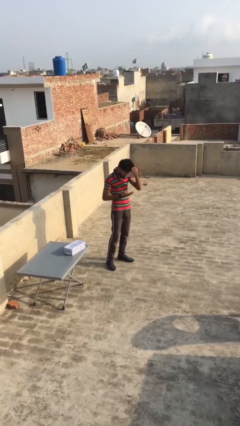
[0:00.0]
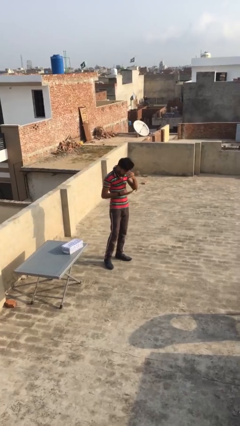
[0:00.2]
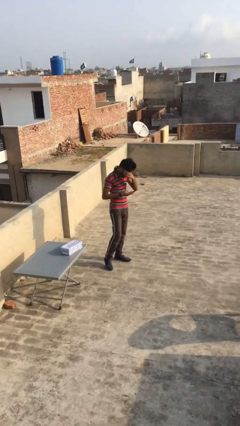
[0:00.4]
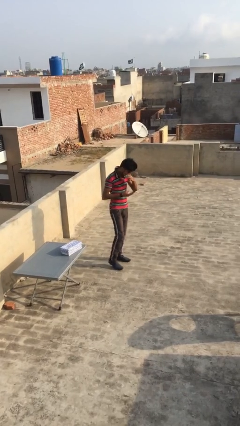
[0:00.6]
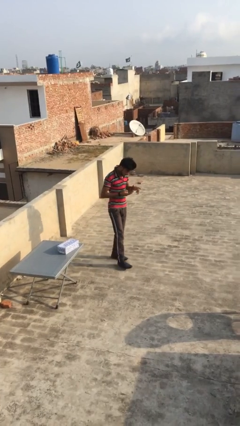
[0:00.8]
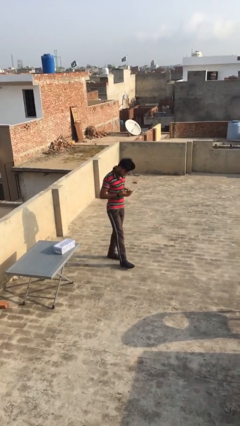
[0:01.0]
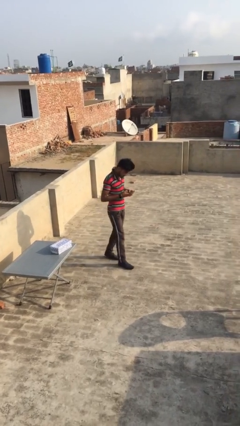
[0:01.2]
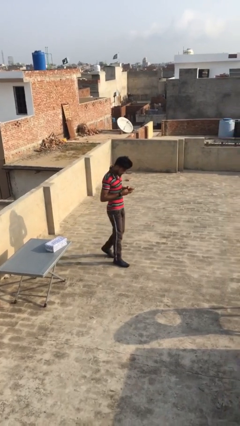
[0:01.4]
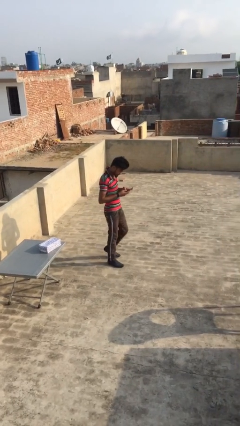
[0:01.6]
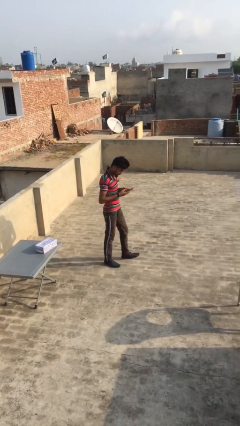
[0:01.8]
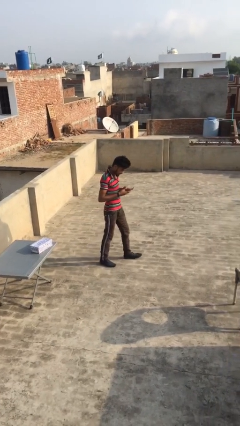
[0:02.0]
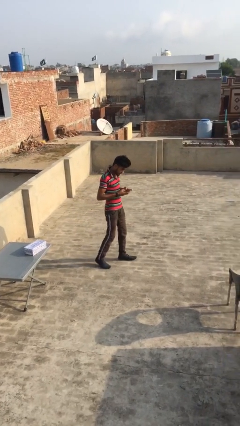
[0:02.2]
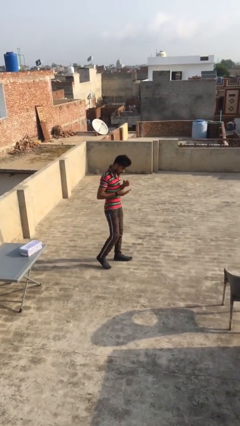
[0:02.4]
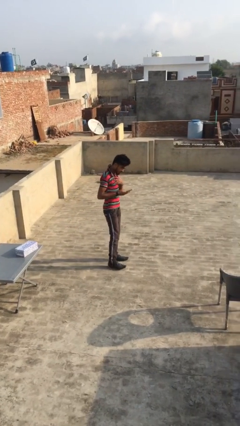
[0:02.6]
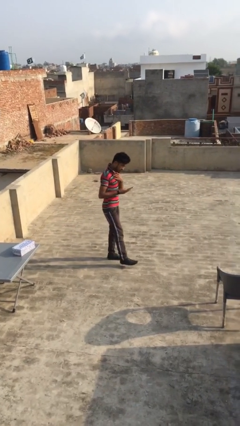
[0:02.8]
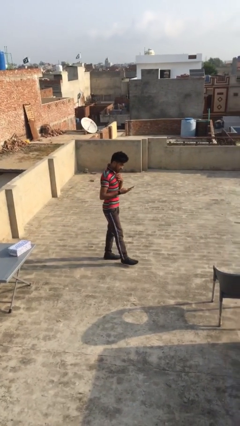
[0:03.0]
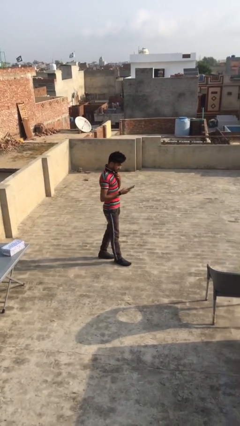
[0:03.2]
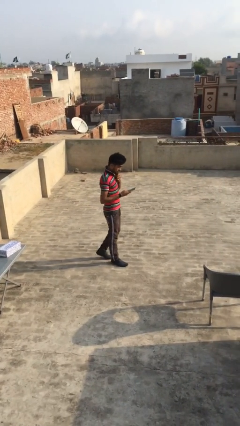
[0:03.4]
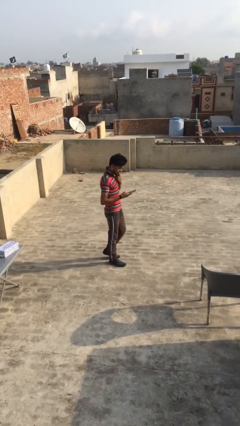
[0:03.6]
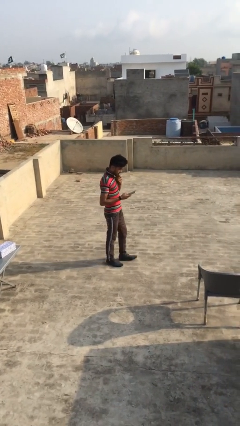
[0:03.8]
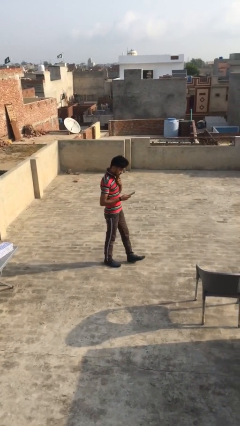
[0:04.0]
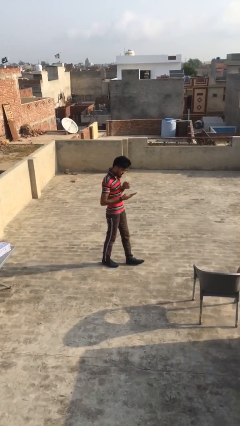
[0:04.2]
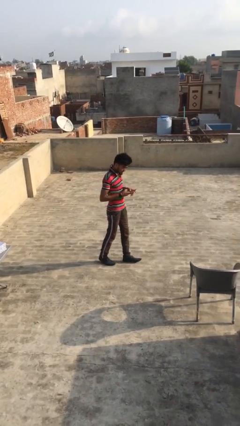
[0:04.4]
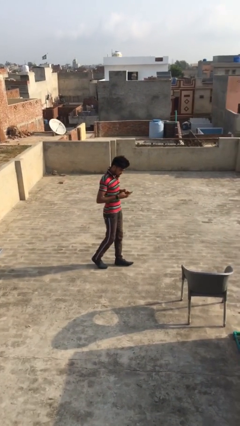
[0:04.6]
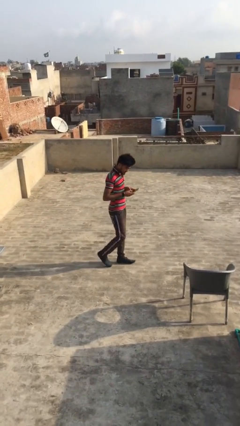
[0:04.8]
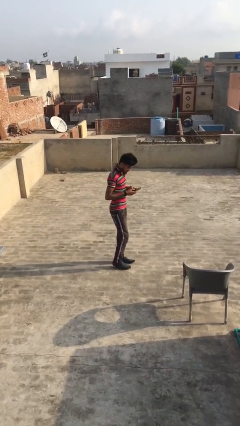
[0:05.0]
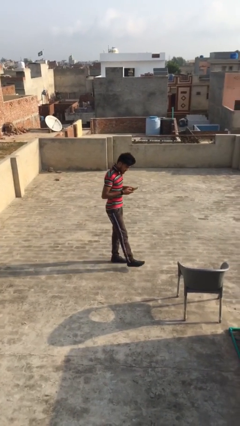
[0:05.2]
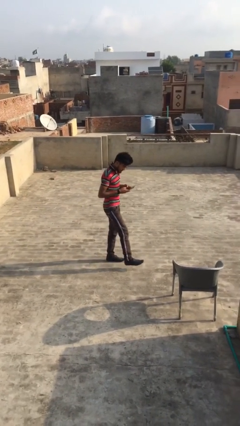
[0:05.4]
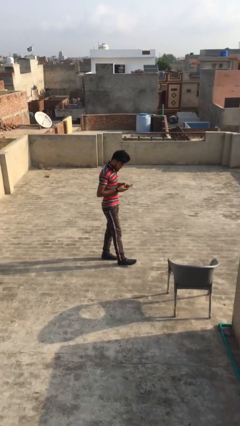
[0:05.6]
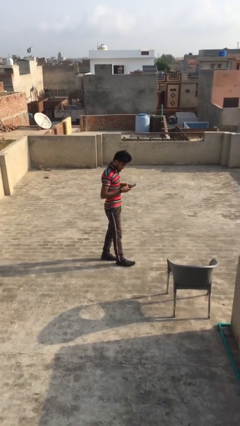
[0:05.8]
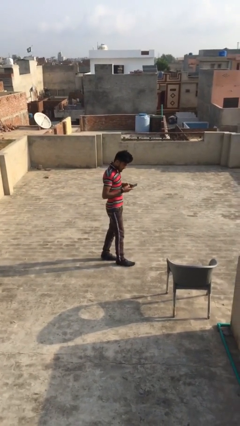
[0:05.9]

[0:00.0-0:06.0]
person texts on phone

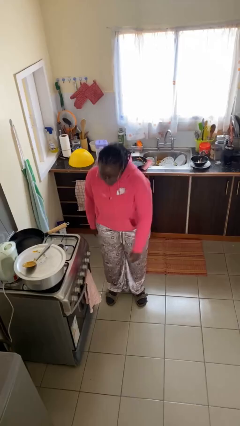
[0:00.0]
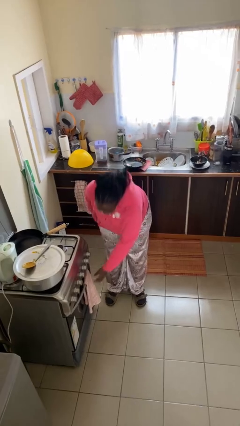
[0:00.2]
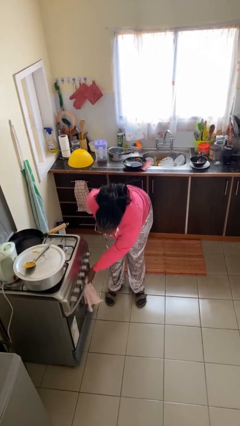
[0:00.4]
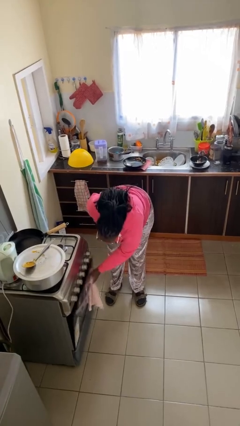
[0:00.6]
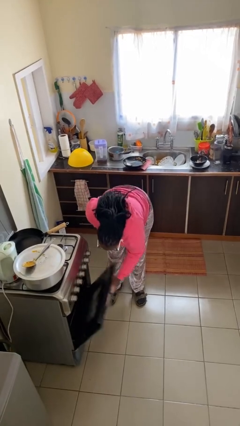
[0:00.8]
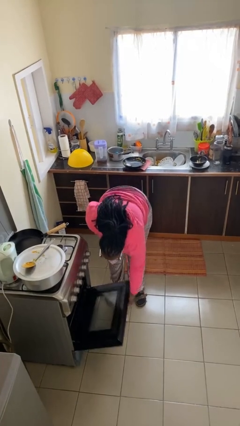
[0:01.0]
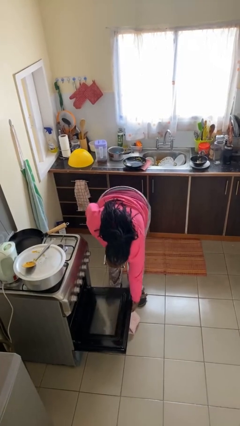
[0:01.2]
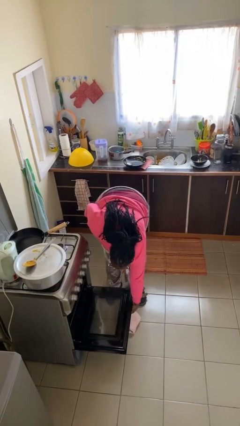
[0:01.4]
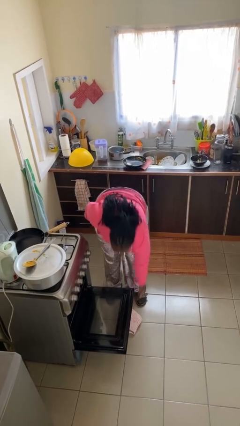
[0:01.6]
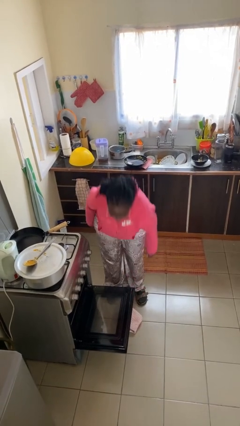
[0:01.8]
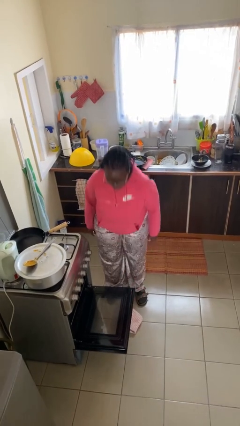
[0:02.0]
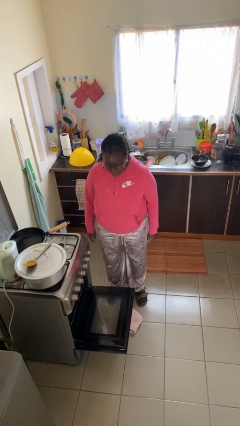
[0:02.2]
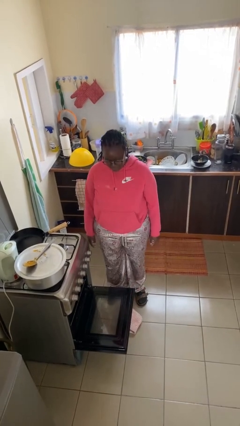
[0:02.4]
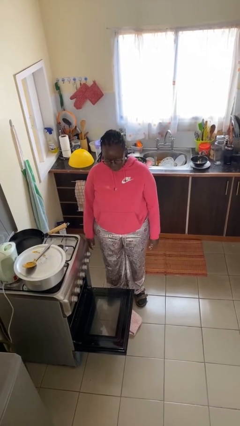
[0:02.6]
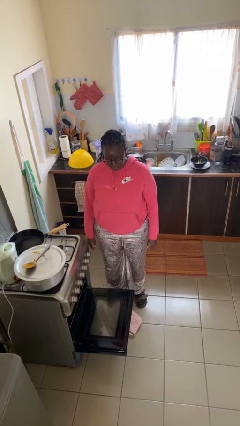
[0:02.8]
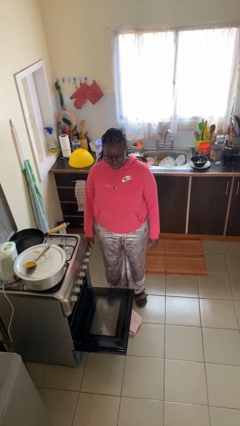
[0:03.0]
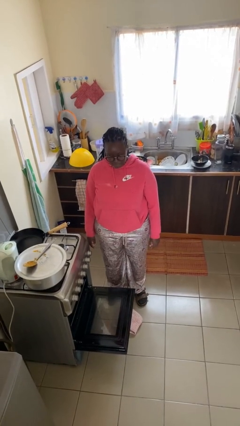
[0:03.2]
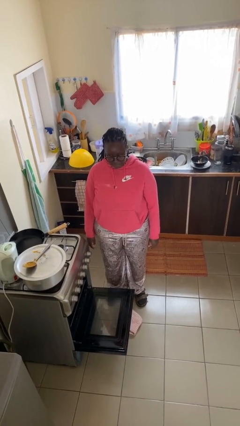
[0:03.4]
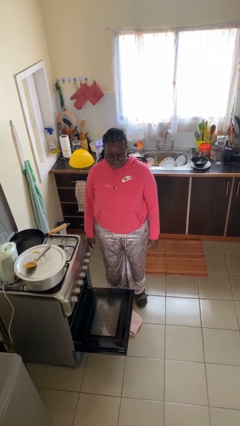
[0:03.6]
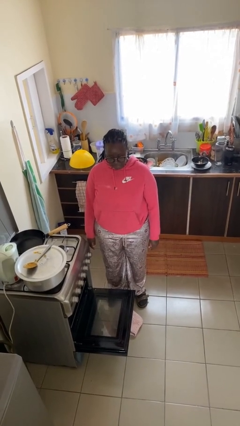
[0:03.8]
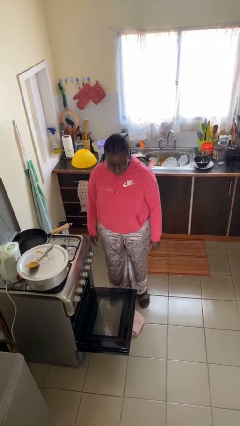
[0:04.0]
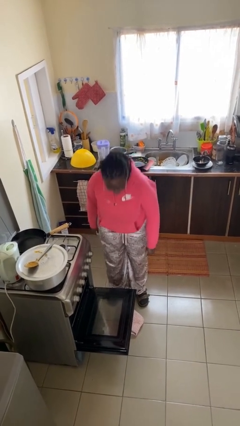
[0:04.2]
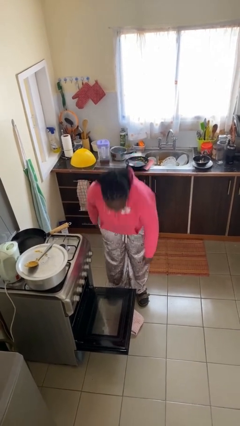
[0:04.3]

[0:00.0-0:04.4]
person opens oven door

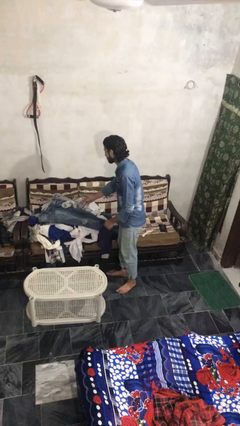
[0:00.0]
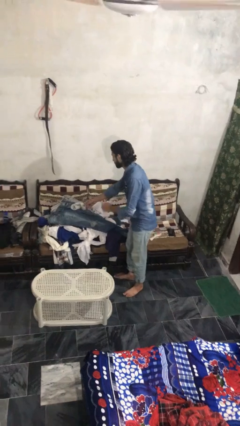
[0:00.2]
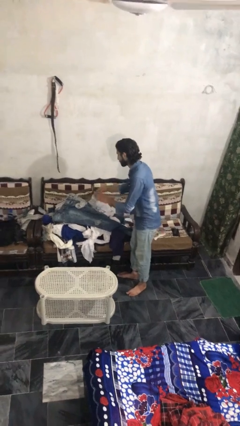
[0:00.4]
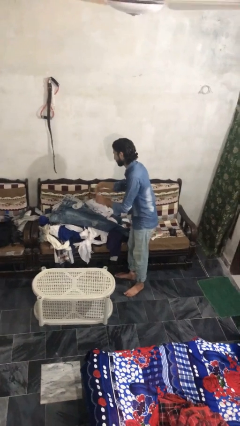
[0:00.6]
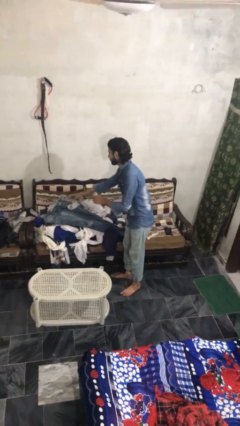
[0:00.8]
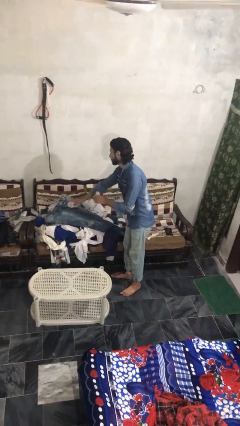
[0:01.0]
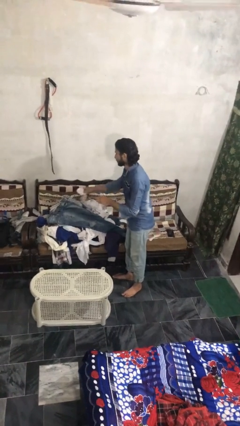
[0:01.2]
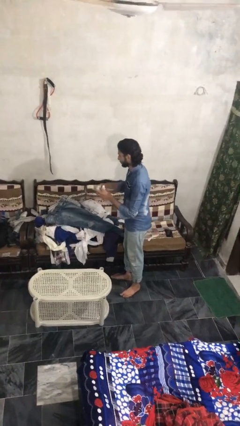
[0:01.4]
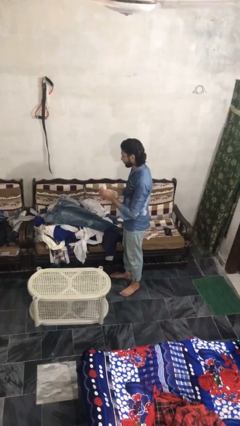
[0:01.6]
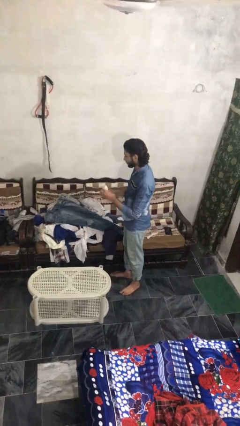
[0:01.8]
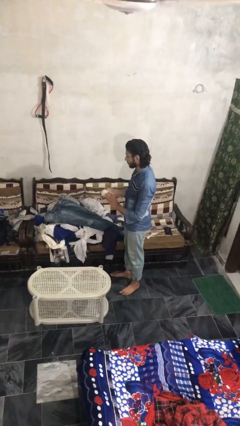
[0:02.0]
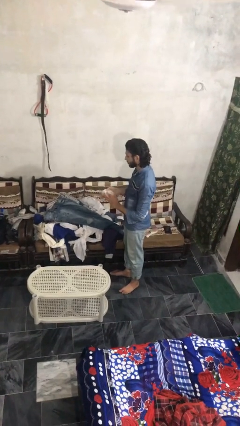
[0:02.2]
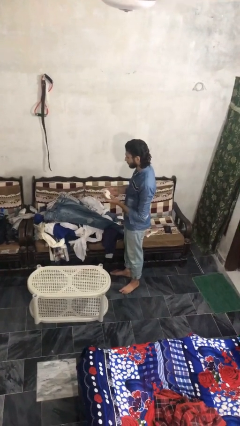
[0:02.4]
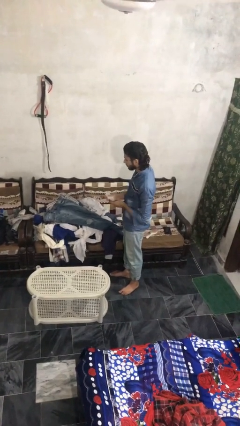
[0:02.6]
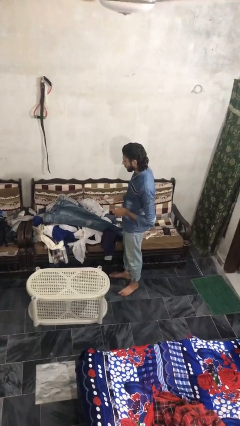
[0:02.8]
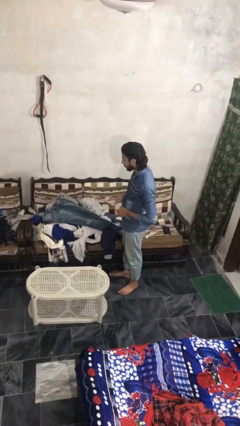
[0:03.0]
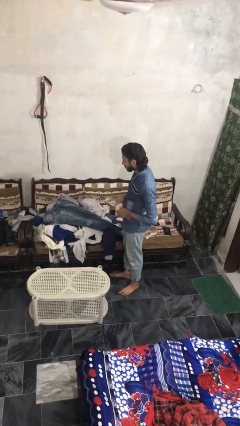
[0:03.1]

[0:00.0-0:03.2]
person folds socks

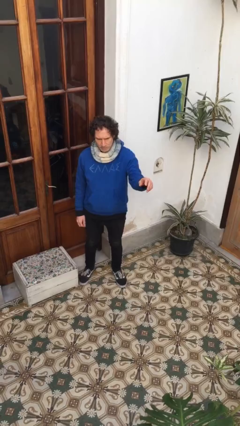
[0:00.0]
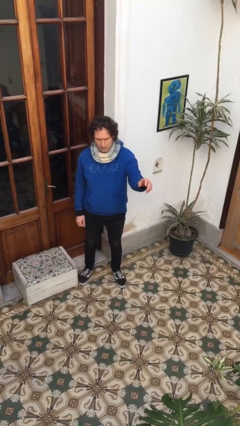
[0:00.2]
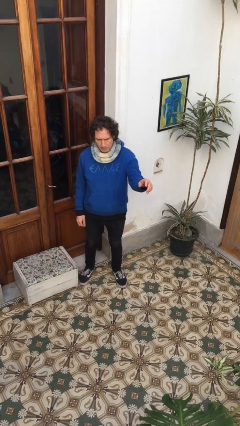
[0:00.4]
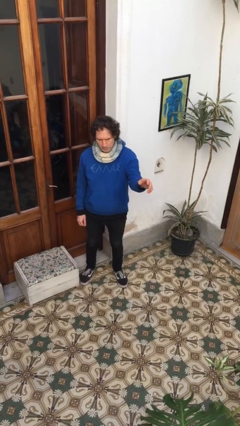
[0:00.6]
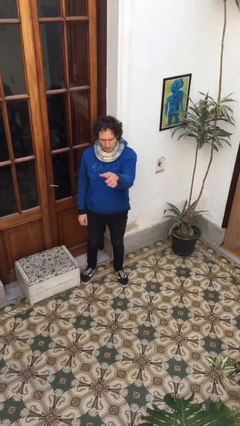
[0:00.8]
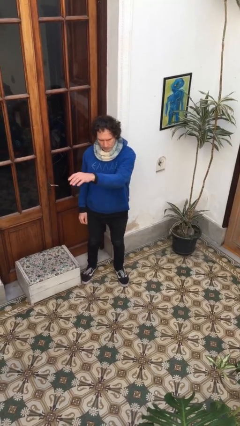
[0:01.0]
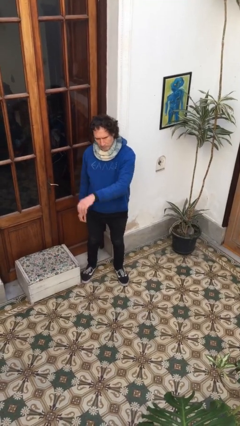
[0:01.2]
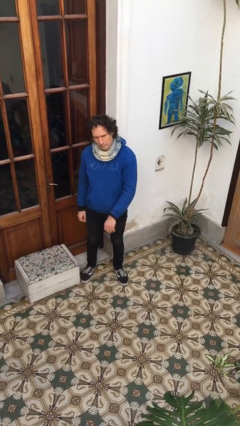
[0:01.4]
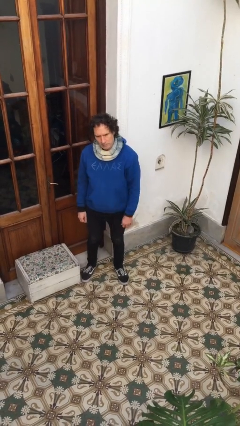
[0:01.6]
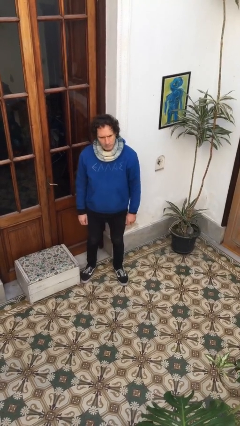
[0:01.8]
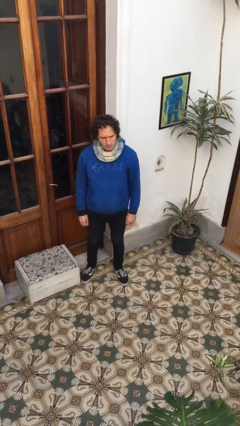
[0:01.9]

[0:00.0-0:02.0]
person gestures swipe right

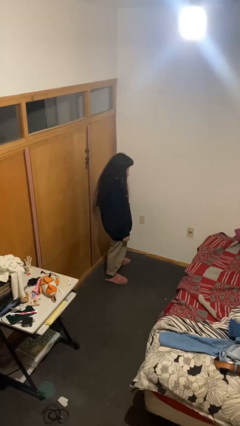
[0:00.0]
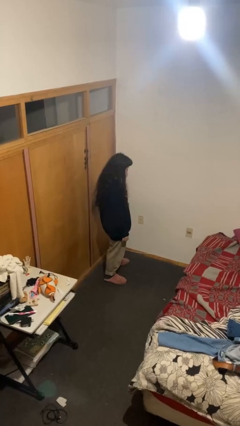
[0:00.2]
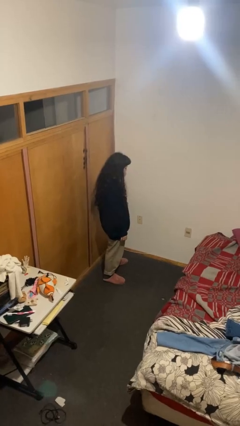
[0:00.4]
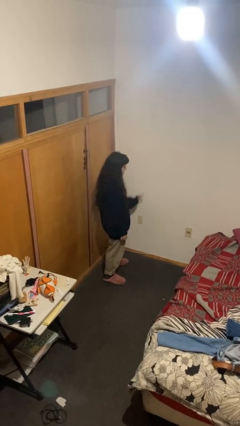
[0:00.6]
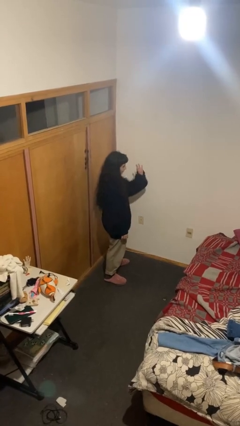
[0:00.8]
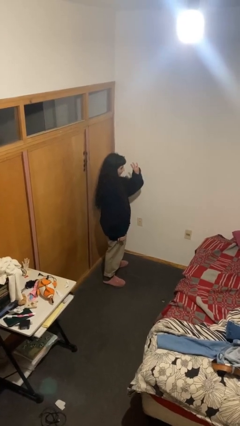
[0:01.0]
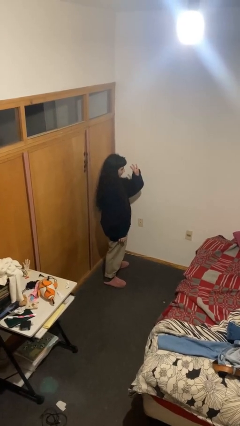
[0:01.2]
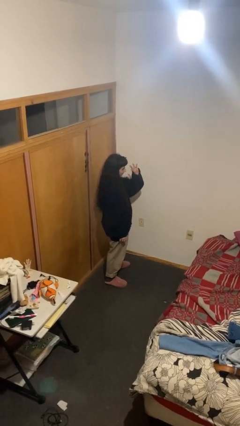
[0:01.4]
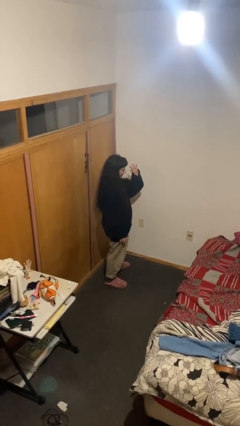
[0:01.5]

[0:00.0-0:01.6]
person gestures number four

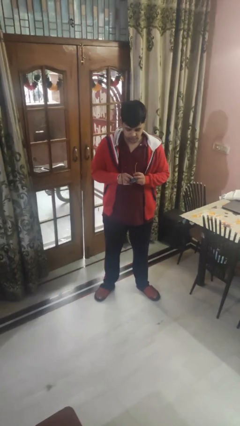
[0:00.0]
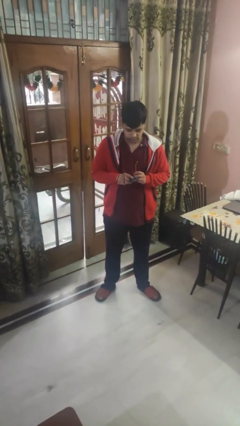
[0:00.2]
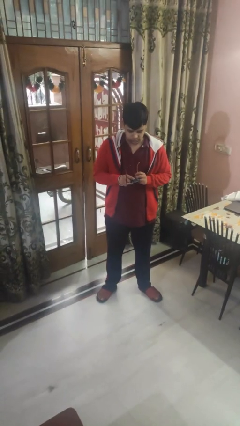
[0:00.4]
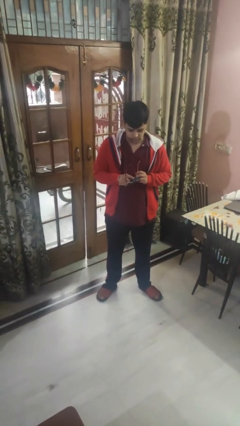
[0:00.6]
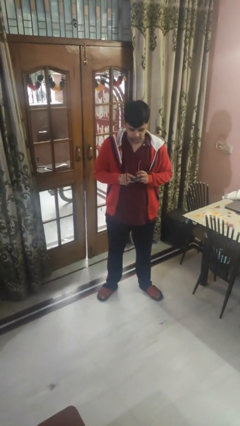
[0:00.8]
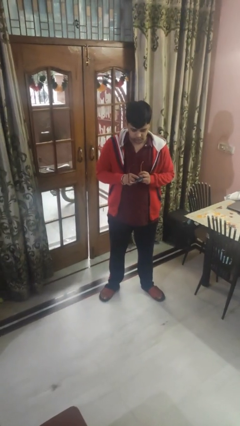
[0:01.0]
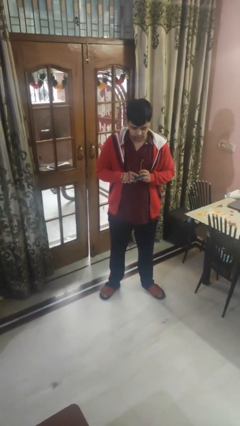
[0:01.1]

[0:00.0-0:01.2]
person cleans eyeglasses
